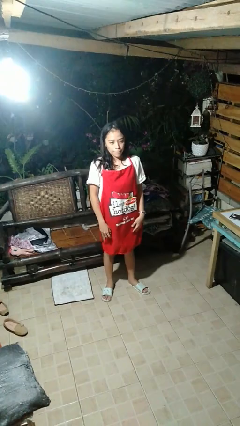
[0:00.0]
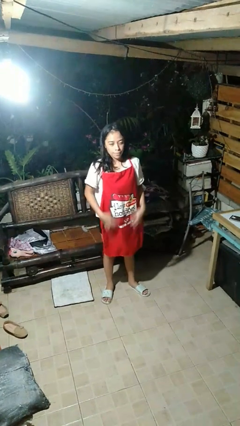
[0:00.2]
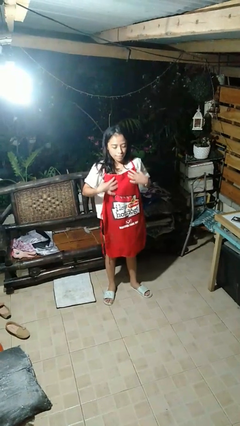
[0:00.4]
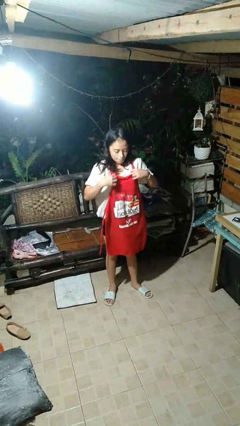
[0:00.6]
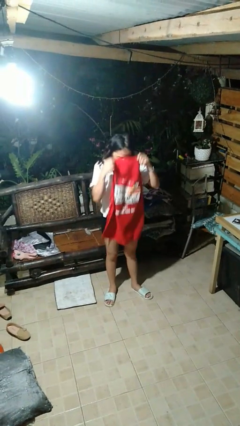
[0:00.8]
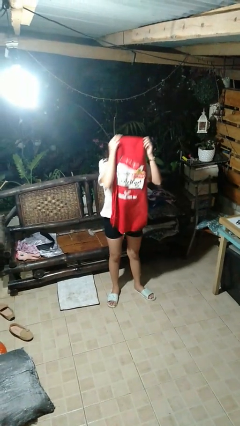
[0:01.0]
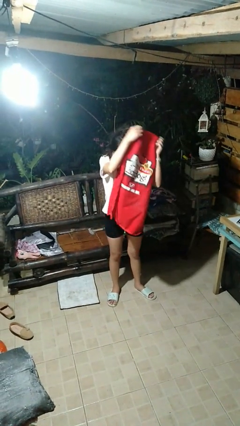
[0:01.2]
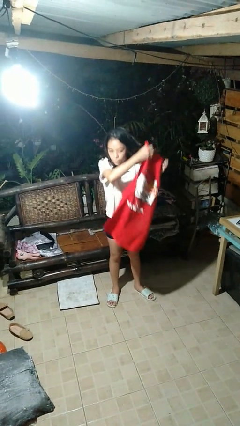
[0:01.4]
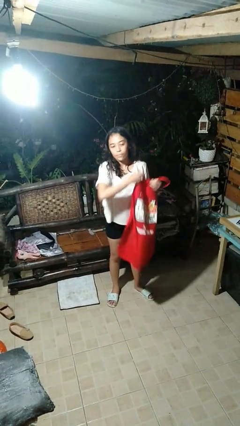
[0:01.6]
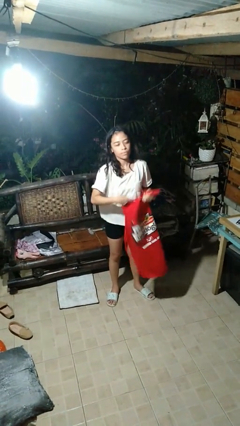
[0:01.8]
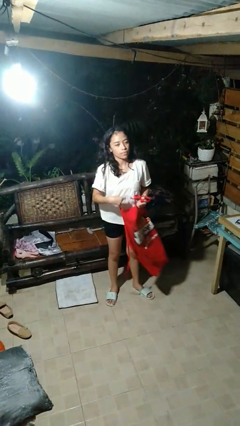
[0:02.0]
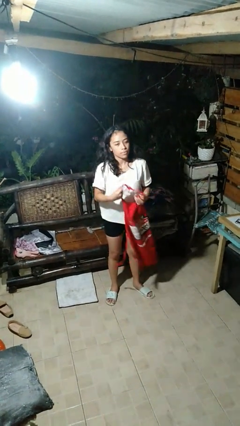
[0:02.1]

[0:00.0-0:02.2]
person takes off apron

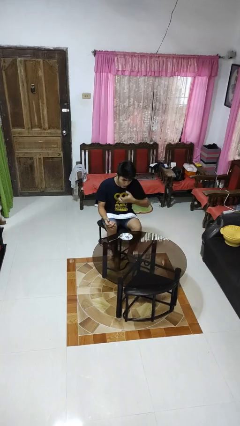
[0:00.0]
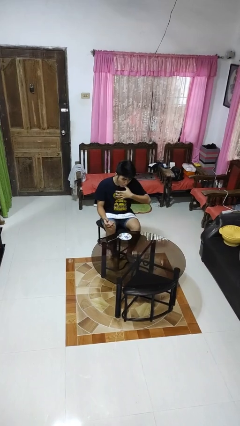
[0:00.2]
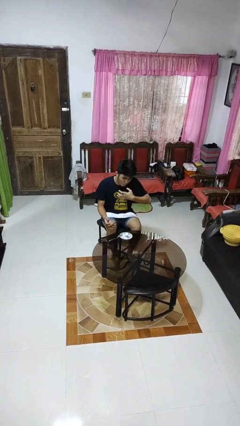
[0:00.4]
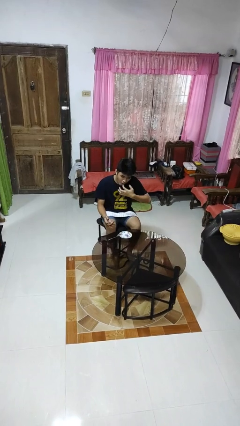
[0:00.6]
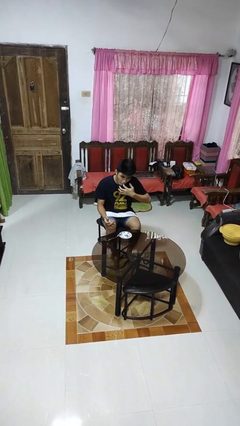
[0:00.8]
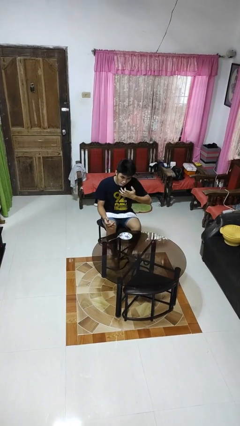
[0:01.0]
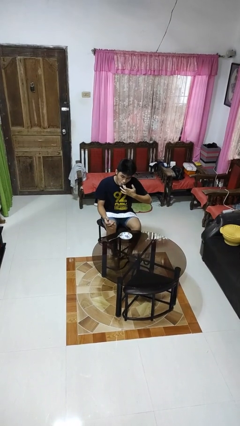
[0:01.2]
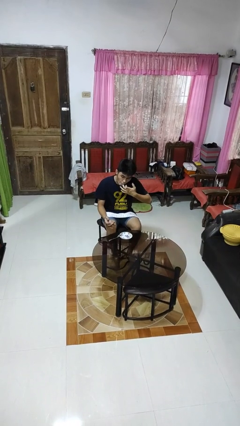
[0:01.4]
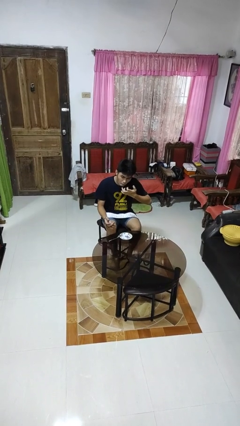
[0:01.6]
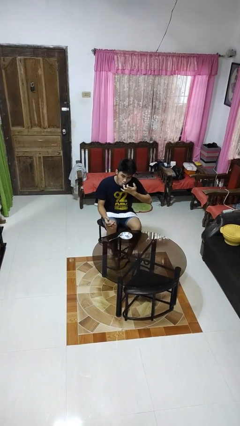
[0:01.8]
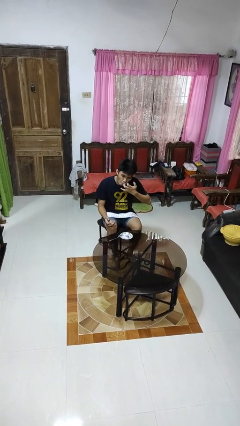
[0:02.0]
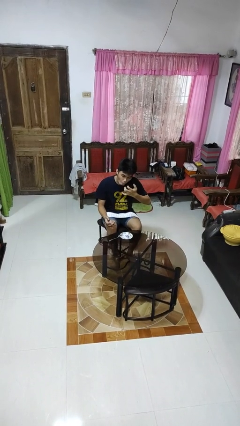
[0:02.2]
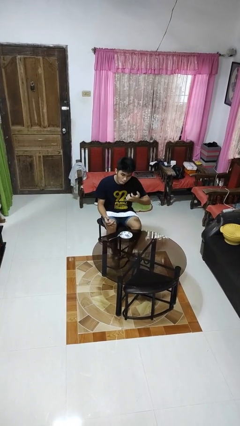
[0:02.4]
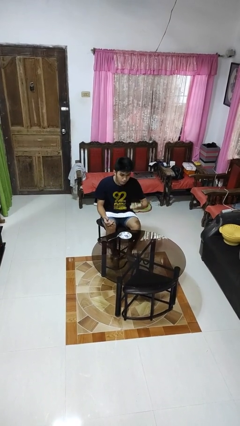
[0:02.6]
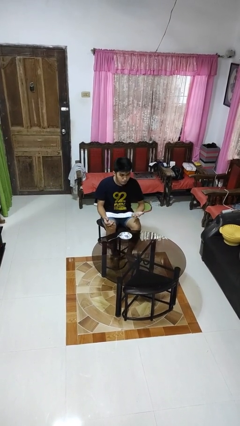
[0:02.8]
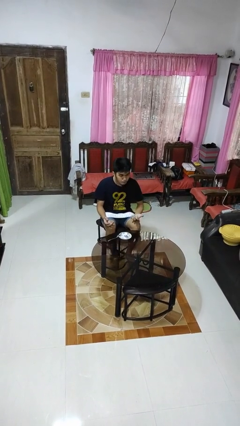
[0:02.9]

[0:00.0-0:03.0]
person licks fingers

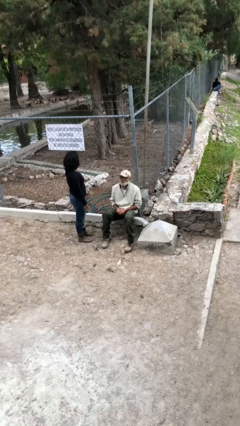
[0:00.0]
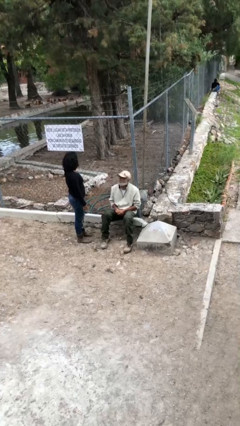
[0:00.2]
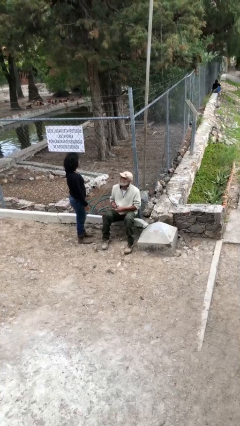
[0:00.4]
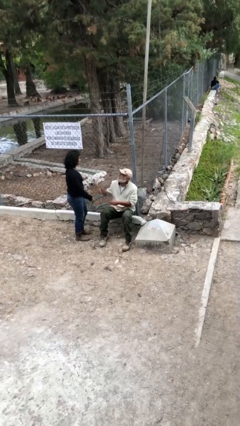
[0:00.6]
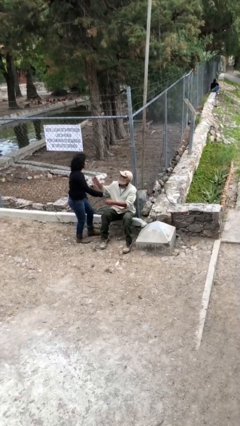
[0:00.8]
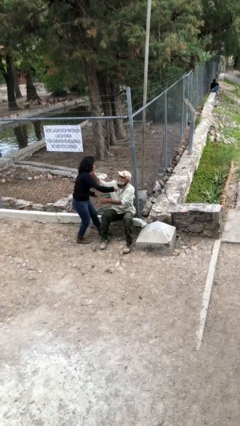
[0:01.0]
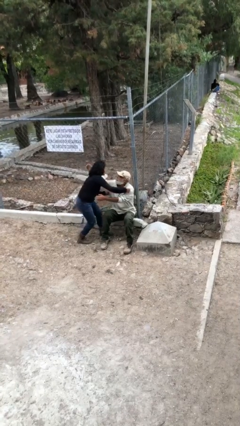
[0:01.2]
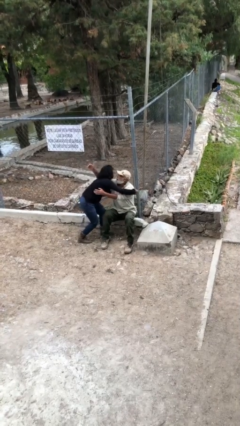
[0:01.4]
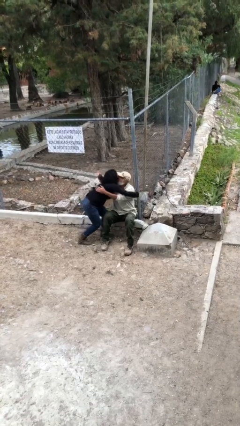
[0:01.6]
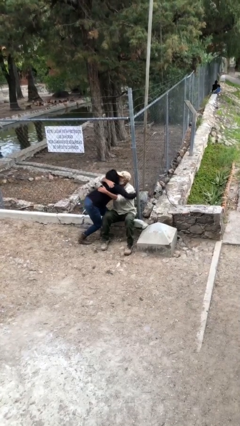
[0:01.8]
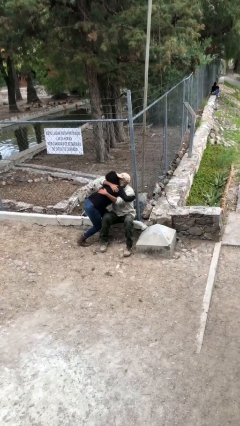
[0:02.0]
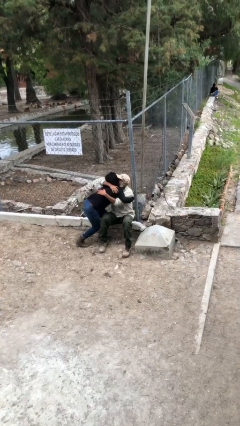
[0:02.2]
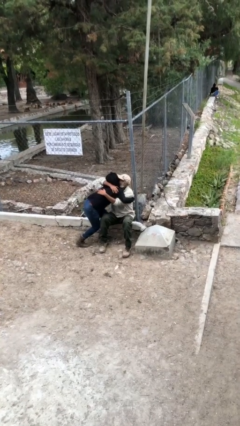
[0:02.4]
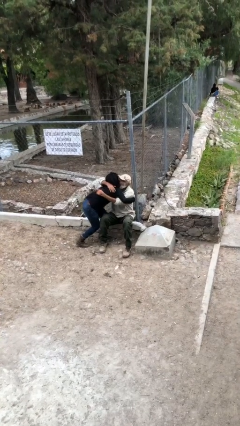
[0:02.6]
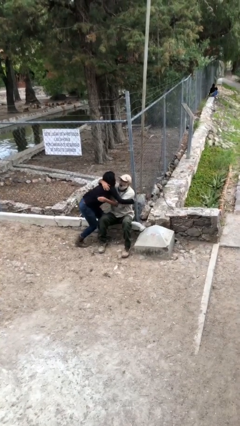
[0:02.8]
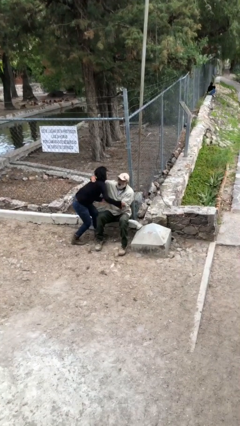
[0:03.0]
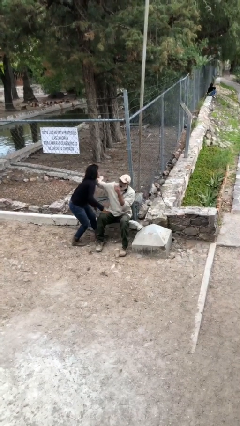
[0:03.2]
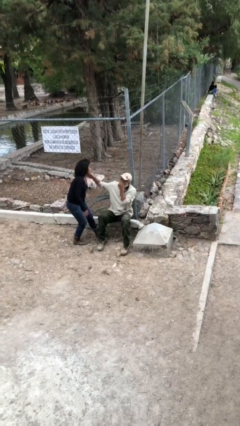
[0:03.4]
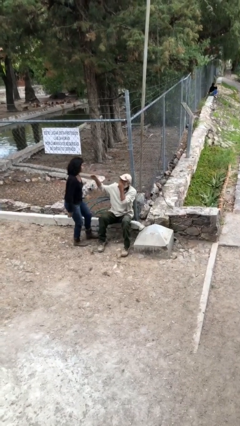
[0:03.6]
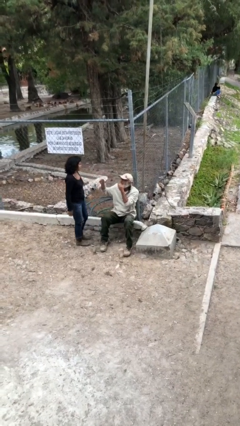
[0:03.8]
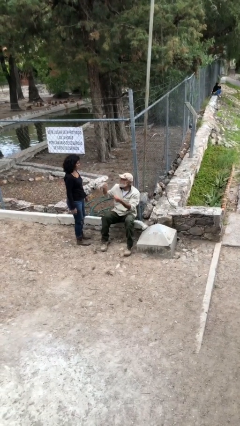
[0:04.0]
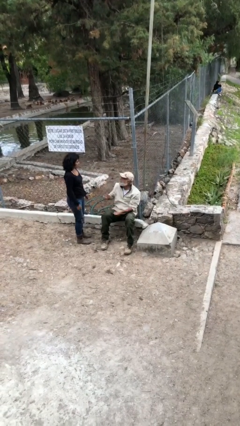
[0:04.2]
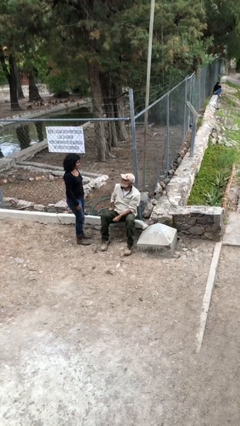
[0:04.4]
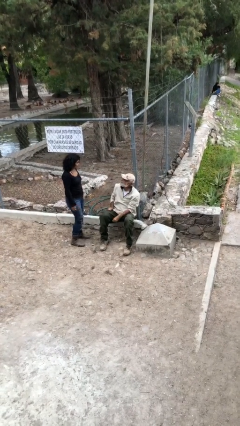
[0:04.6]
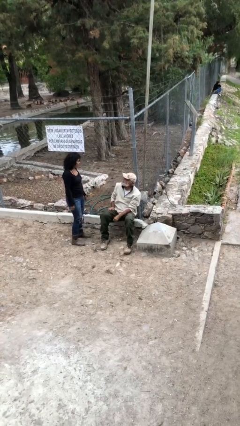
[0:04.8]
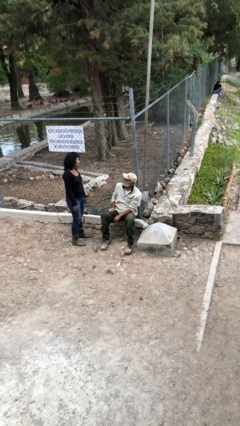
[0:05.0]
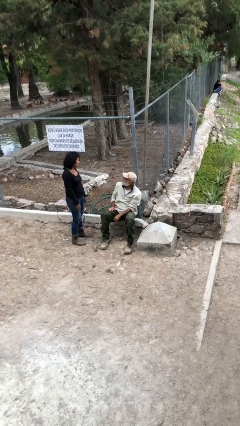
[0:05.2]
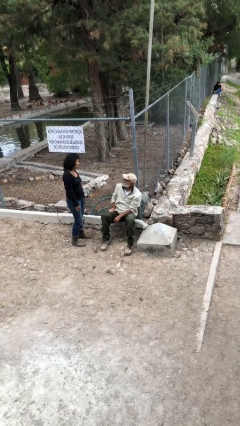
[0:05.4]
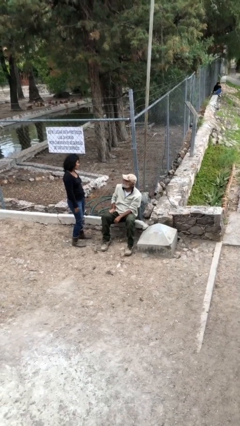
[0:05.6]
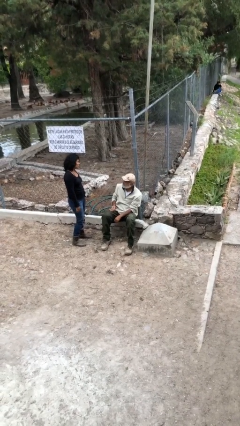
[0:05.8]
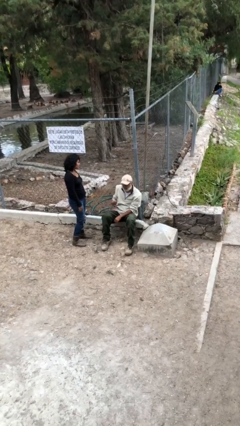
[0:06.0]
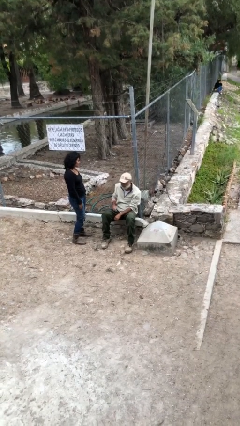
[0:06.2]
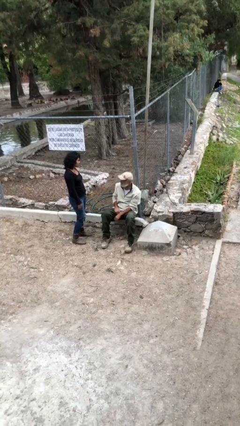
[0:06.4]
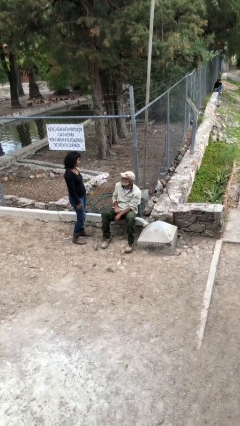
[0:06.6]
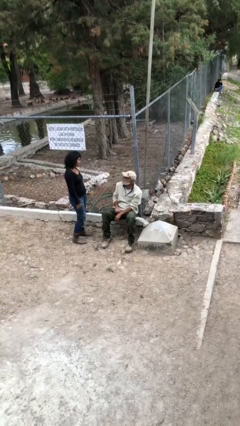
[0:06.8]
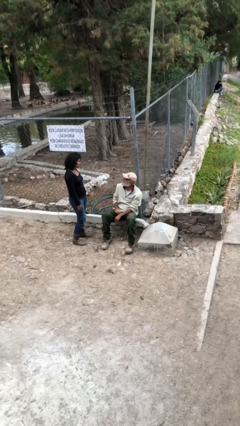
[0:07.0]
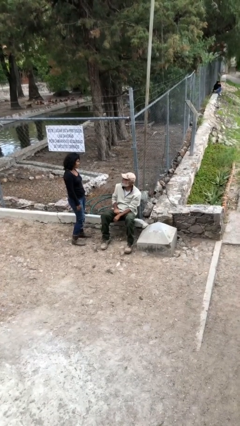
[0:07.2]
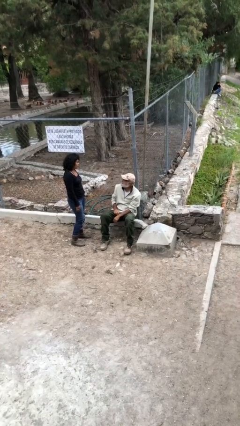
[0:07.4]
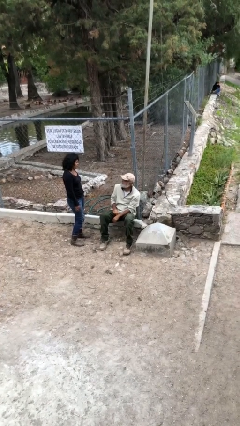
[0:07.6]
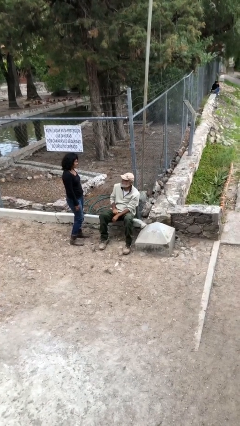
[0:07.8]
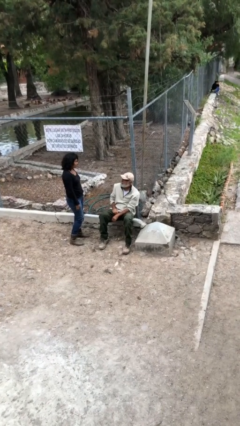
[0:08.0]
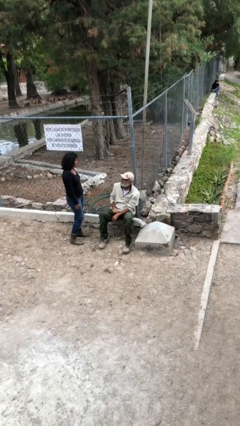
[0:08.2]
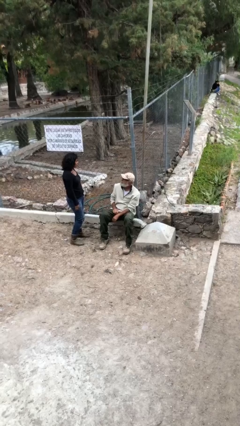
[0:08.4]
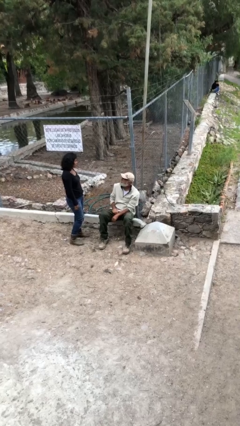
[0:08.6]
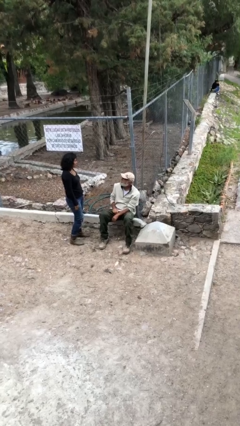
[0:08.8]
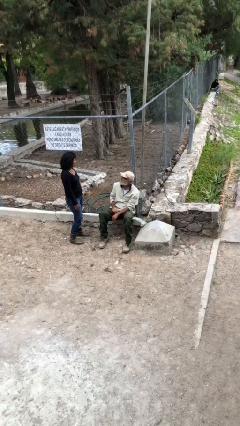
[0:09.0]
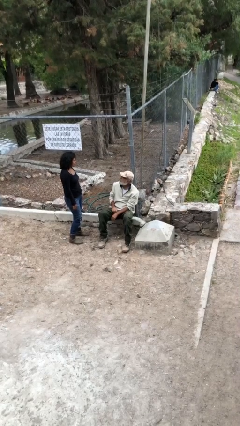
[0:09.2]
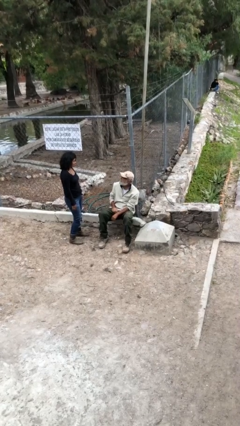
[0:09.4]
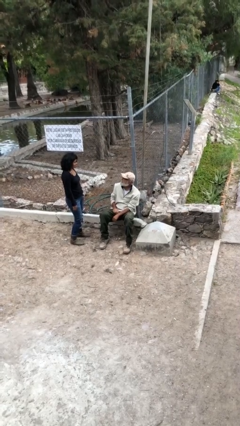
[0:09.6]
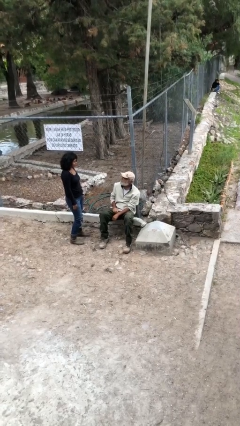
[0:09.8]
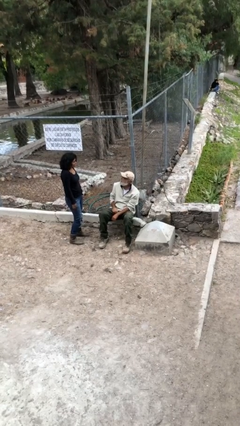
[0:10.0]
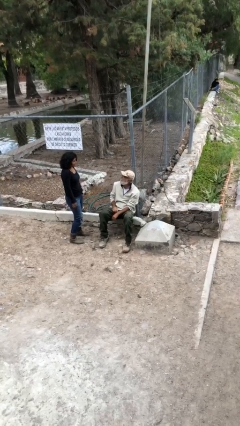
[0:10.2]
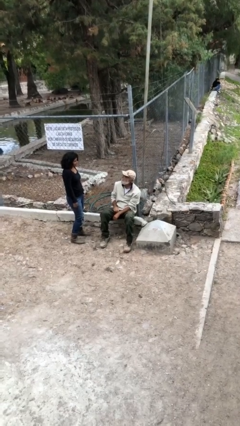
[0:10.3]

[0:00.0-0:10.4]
person embraces person

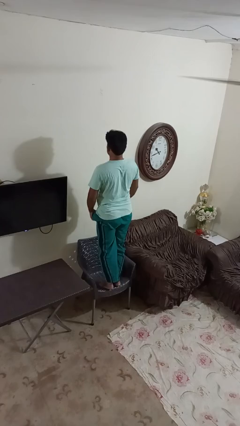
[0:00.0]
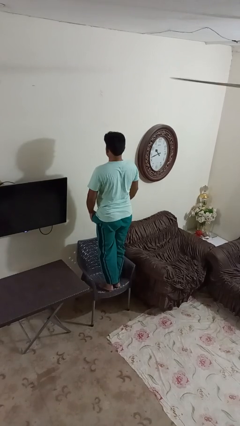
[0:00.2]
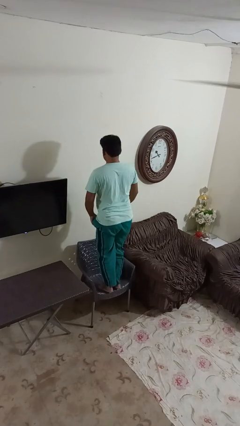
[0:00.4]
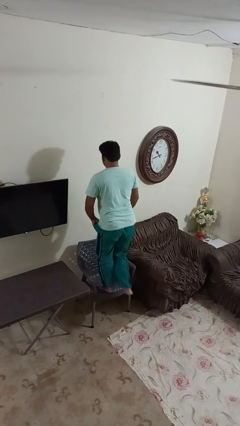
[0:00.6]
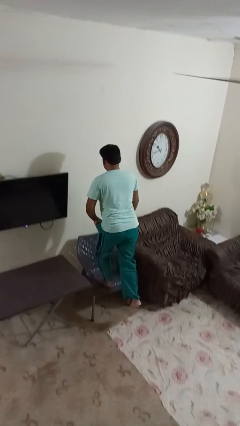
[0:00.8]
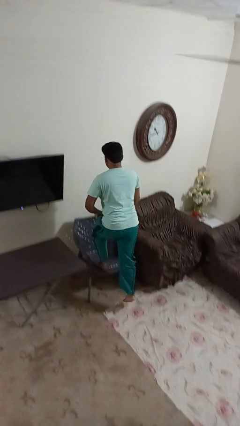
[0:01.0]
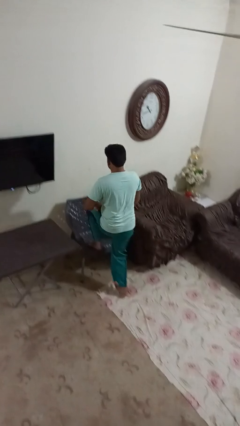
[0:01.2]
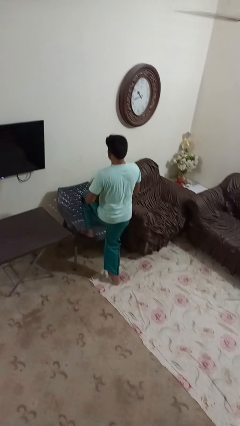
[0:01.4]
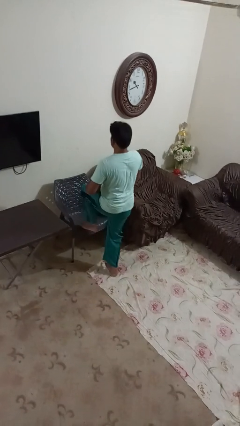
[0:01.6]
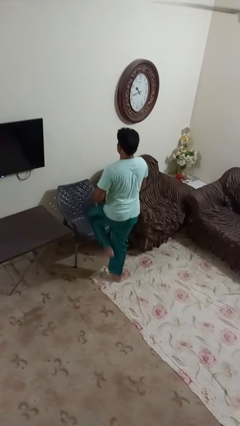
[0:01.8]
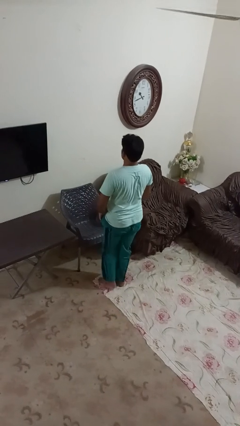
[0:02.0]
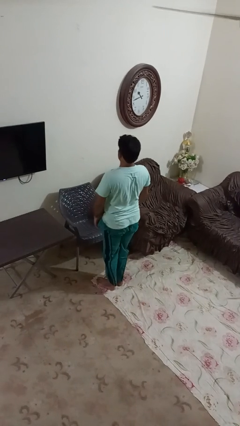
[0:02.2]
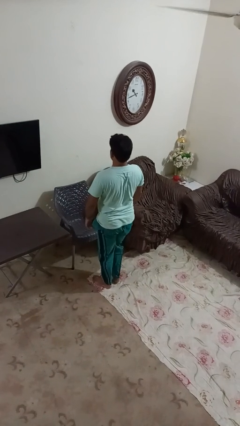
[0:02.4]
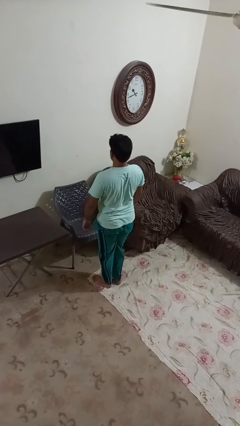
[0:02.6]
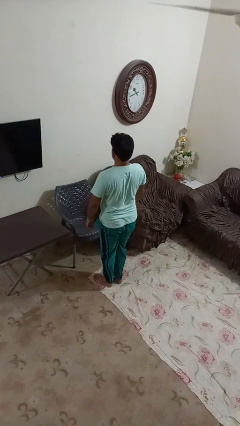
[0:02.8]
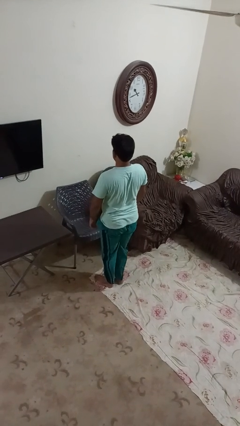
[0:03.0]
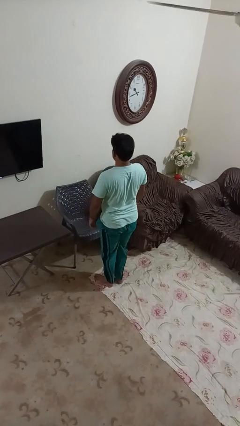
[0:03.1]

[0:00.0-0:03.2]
person climbs off chair
